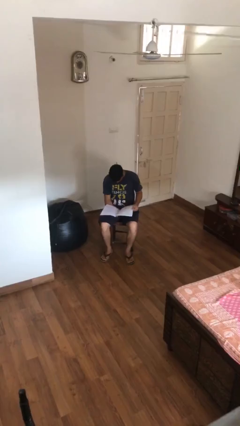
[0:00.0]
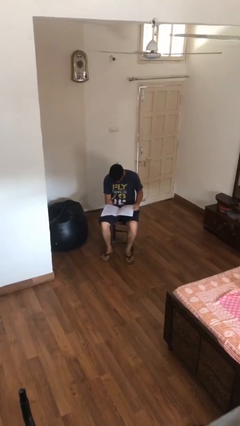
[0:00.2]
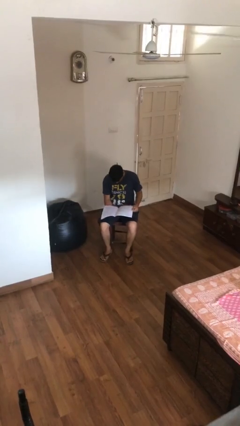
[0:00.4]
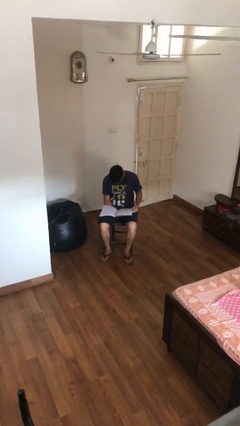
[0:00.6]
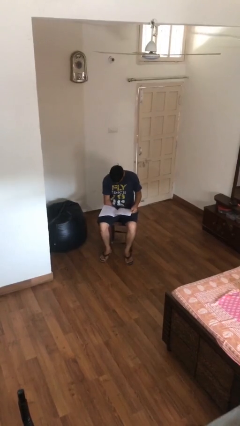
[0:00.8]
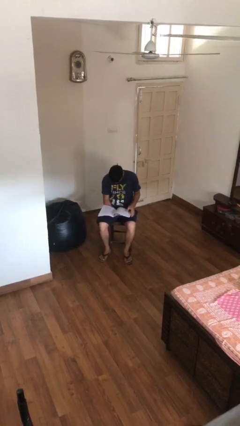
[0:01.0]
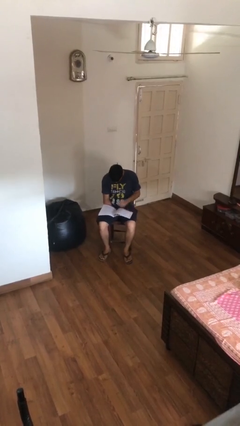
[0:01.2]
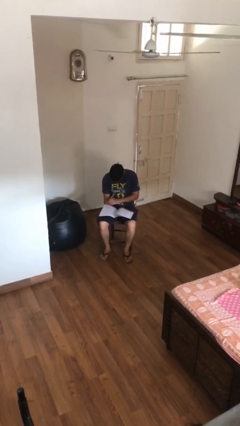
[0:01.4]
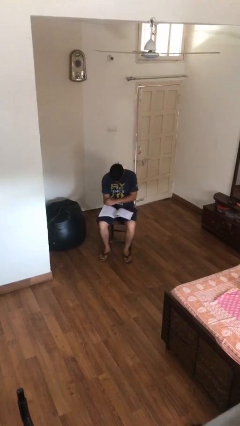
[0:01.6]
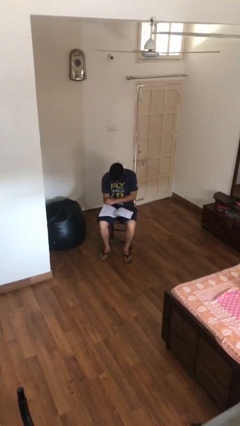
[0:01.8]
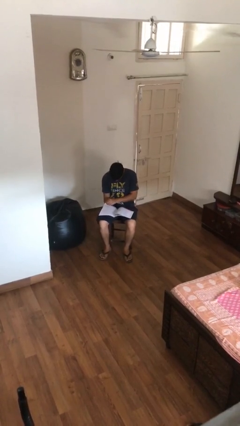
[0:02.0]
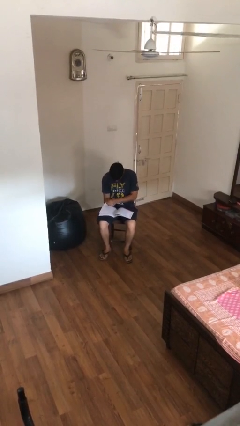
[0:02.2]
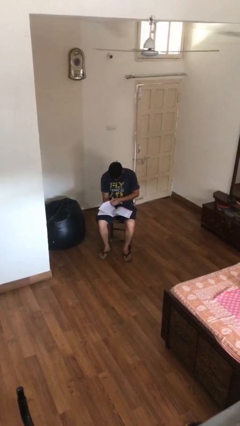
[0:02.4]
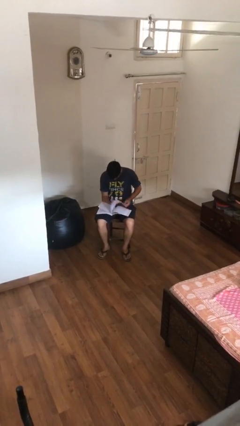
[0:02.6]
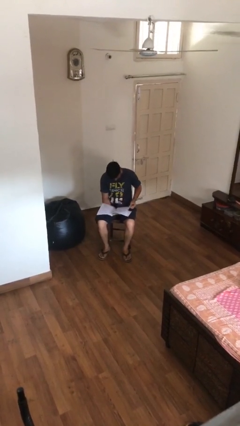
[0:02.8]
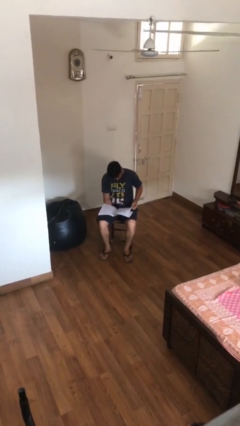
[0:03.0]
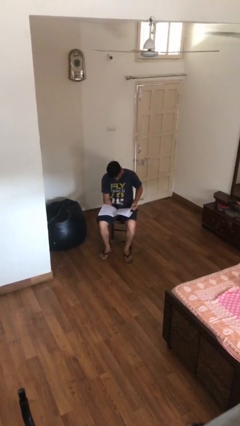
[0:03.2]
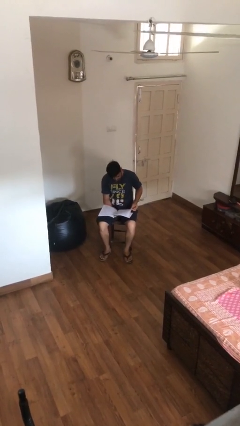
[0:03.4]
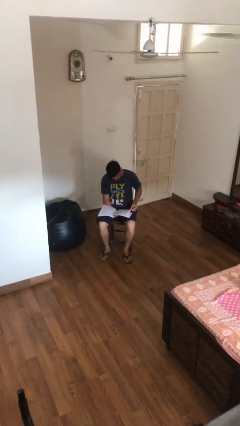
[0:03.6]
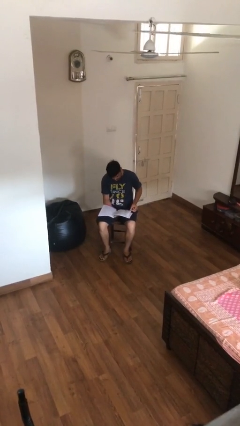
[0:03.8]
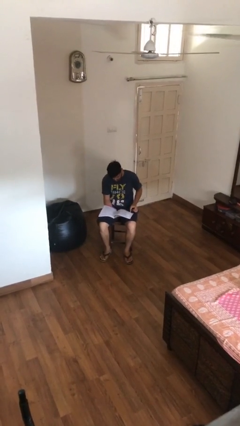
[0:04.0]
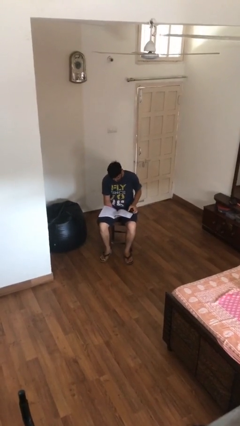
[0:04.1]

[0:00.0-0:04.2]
person reads document

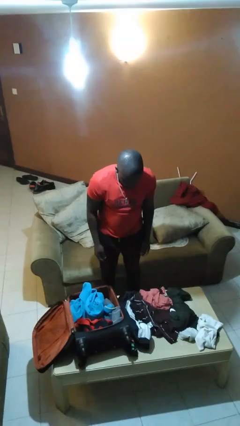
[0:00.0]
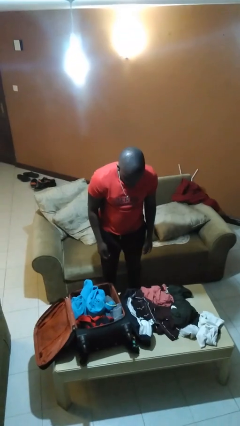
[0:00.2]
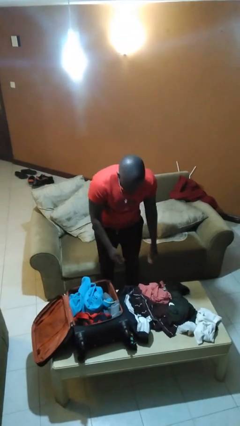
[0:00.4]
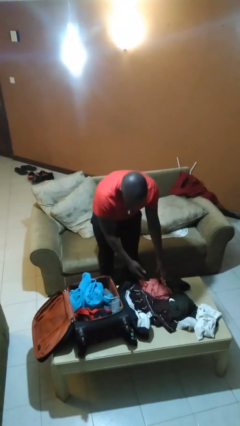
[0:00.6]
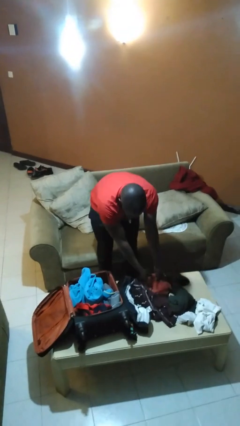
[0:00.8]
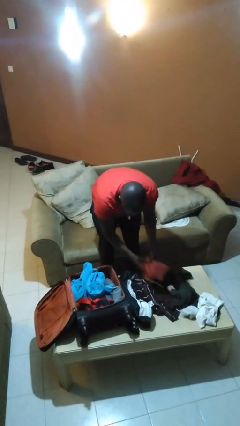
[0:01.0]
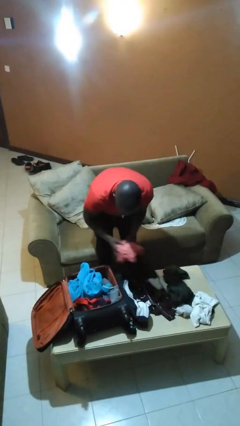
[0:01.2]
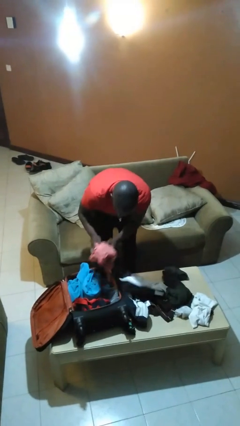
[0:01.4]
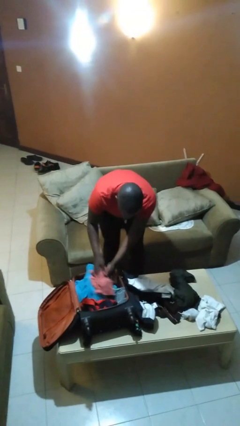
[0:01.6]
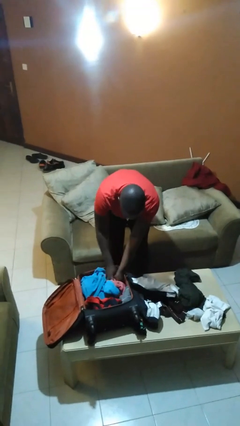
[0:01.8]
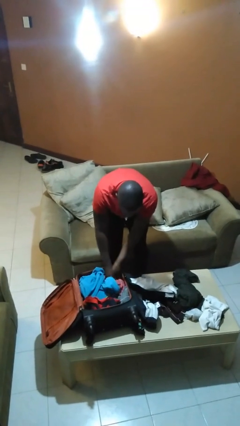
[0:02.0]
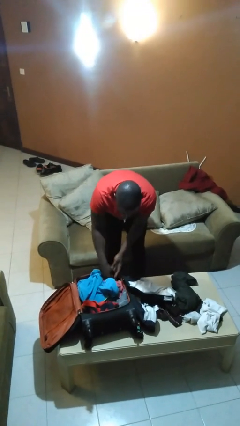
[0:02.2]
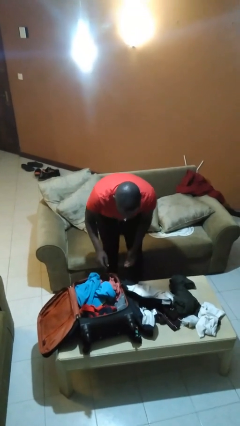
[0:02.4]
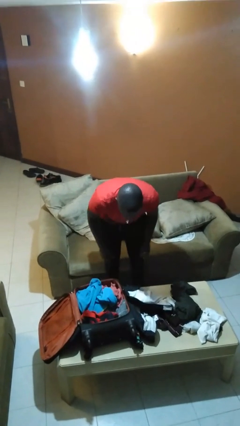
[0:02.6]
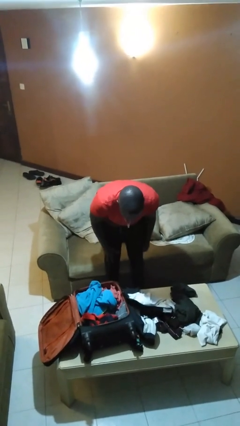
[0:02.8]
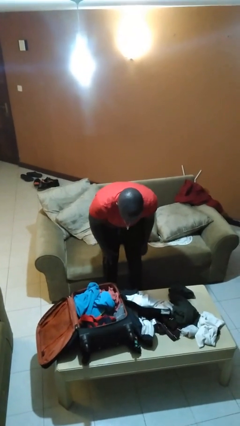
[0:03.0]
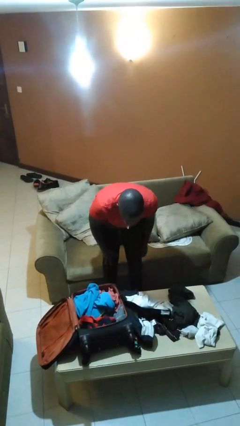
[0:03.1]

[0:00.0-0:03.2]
person loads clothes into suitcase

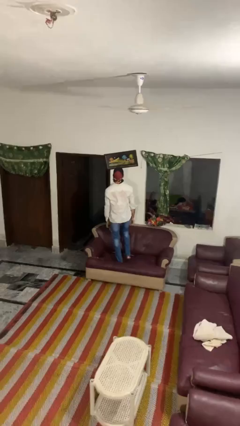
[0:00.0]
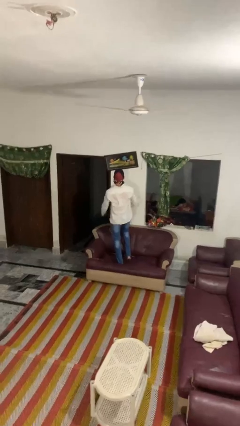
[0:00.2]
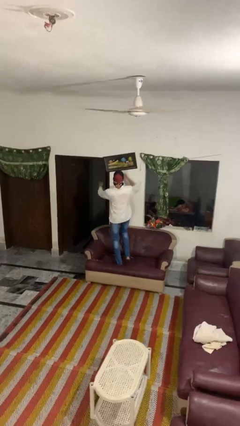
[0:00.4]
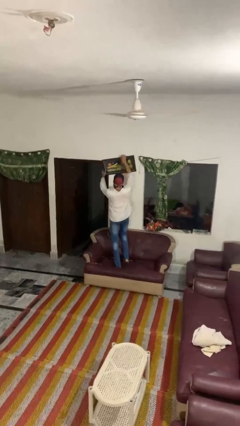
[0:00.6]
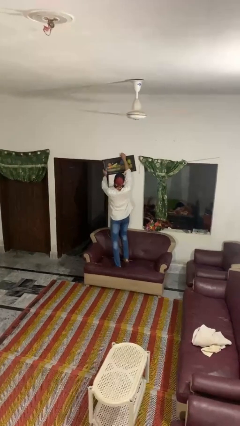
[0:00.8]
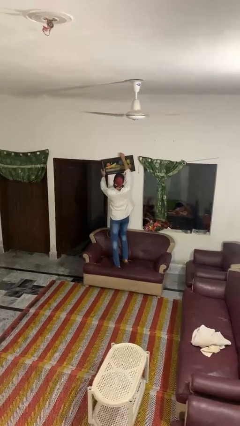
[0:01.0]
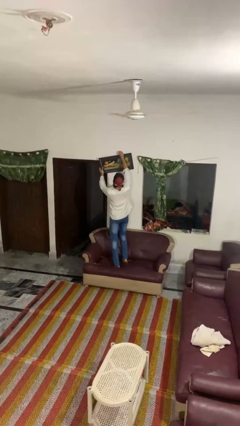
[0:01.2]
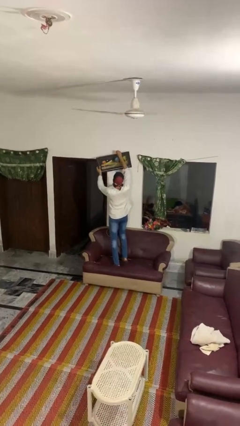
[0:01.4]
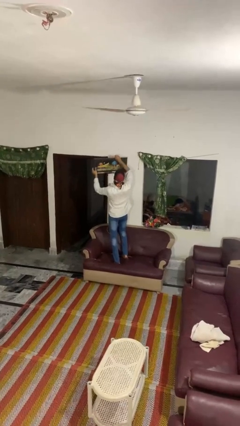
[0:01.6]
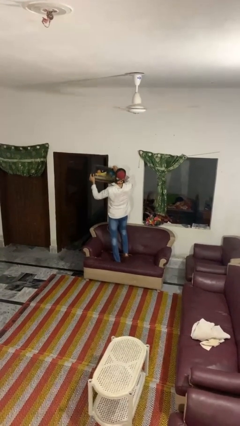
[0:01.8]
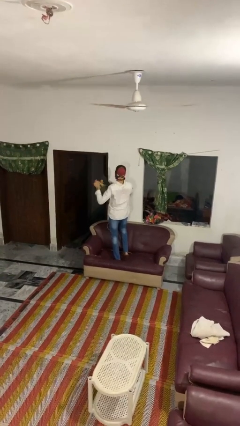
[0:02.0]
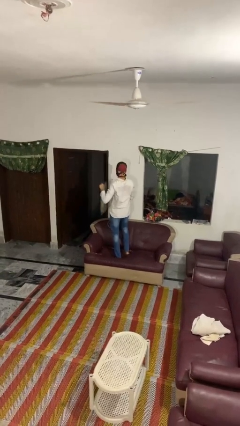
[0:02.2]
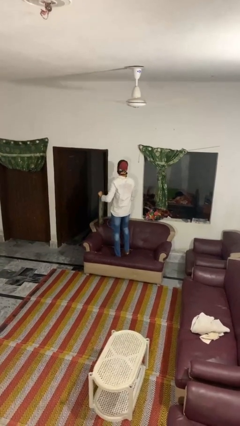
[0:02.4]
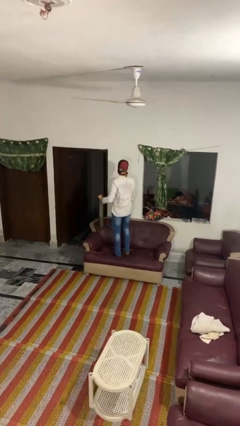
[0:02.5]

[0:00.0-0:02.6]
person takes down picture frame

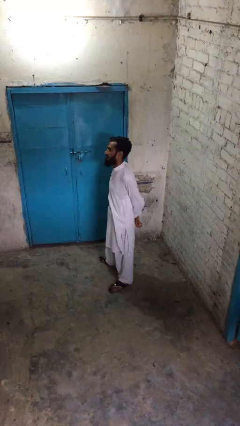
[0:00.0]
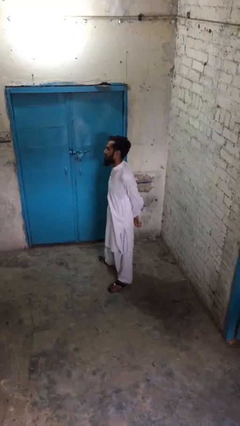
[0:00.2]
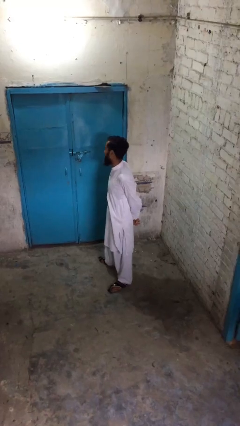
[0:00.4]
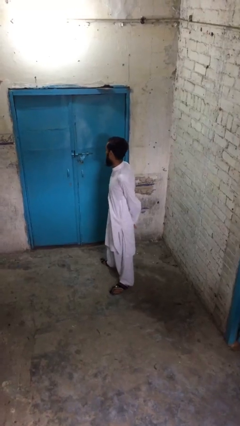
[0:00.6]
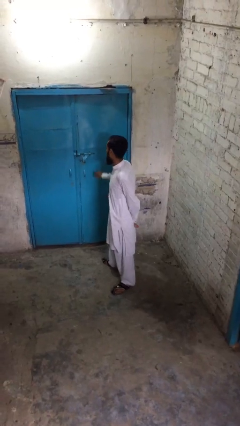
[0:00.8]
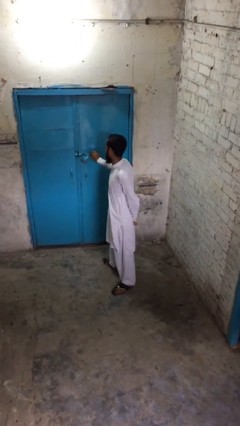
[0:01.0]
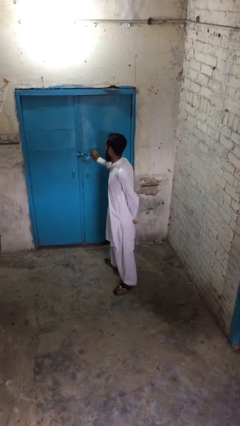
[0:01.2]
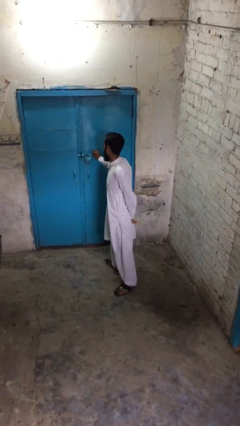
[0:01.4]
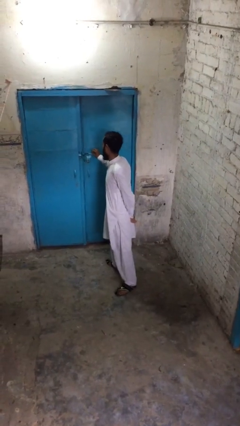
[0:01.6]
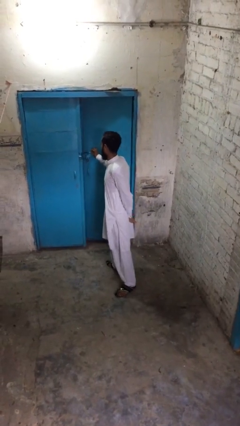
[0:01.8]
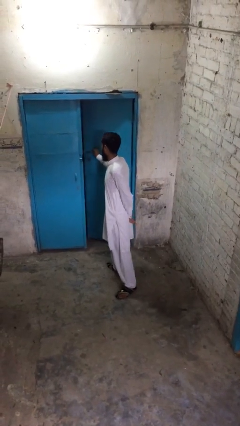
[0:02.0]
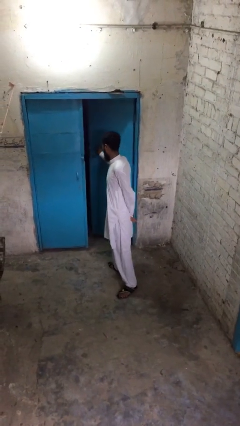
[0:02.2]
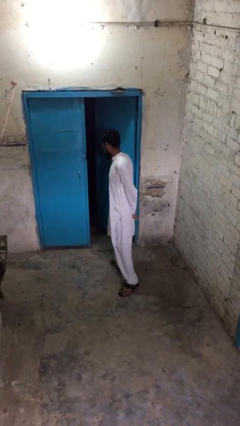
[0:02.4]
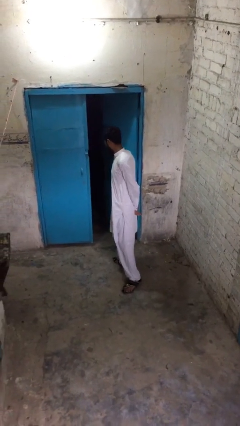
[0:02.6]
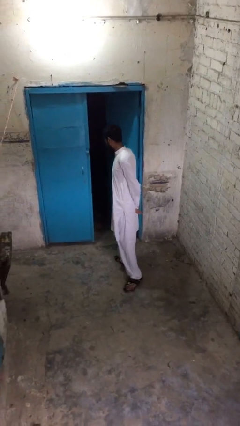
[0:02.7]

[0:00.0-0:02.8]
person opens facility door

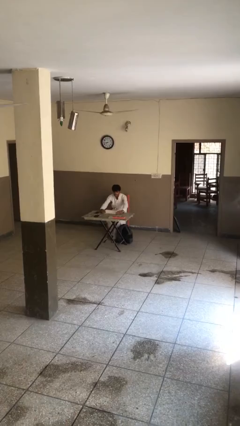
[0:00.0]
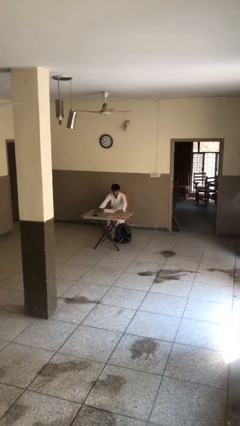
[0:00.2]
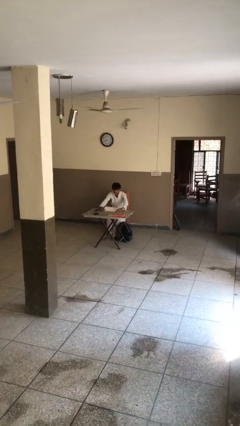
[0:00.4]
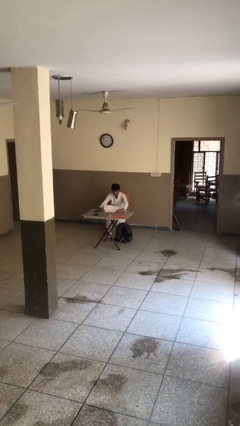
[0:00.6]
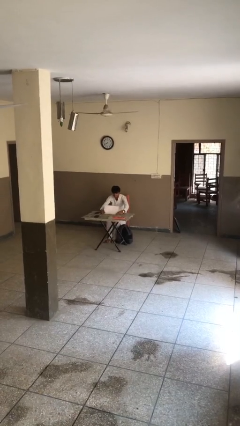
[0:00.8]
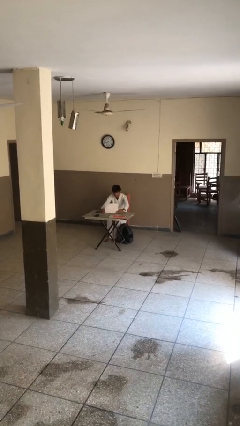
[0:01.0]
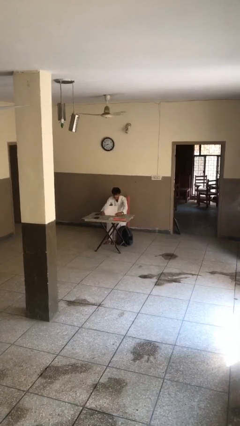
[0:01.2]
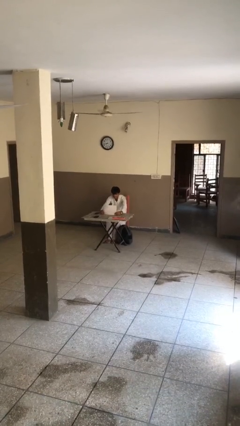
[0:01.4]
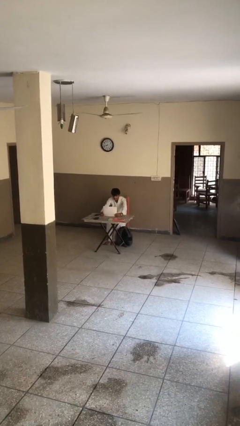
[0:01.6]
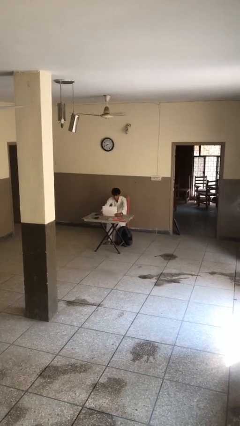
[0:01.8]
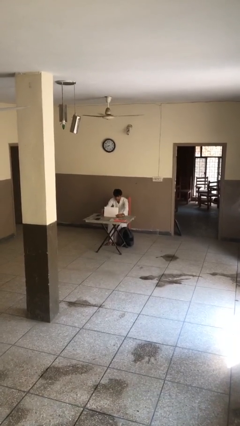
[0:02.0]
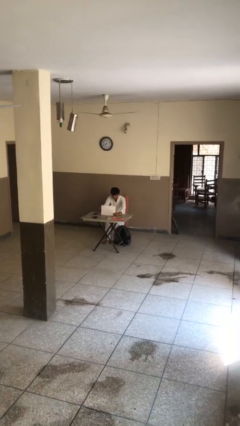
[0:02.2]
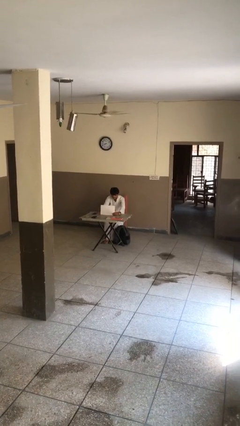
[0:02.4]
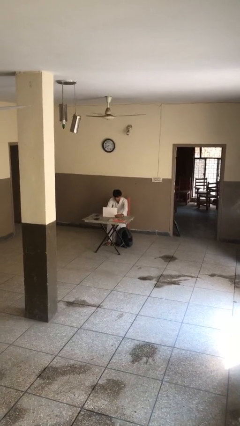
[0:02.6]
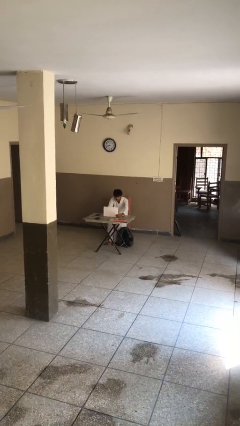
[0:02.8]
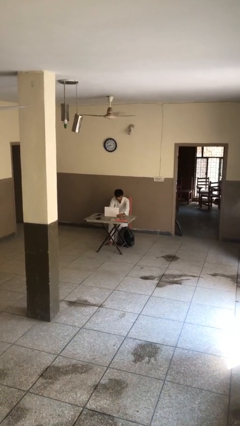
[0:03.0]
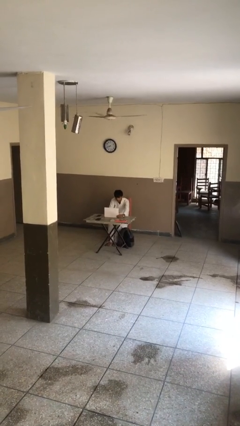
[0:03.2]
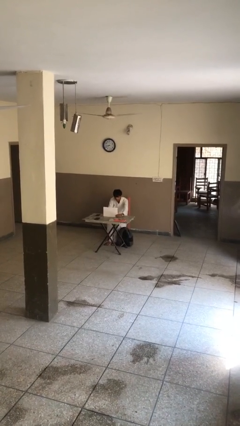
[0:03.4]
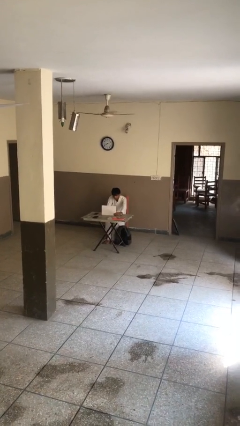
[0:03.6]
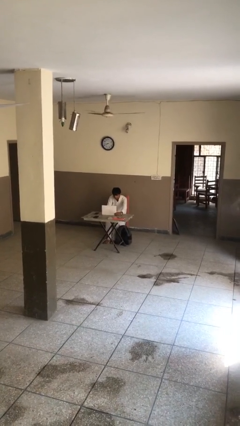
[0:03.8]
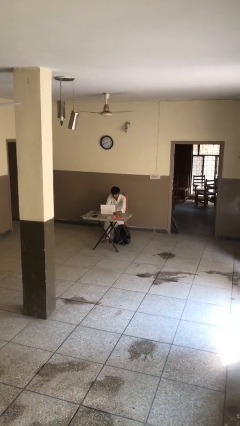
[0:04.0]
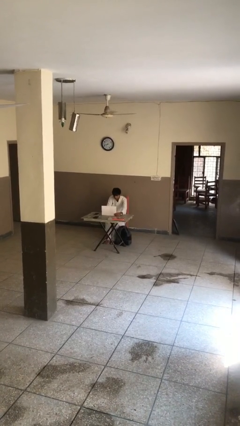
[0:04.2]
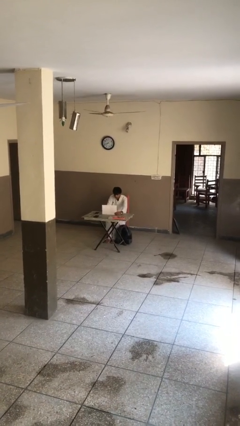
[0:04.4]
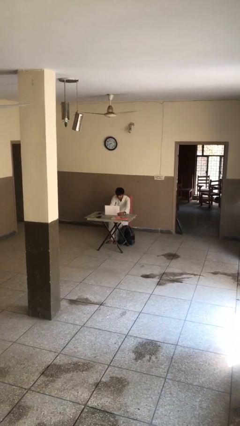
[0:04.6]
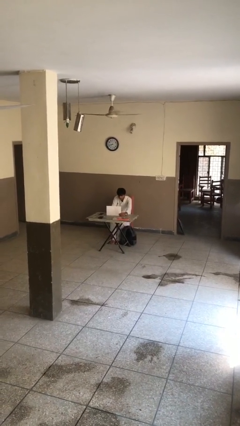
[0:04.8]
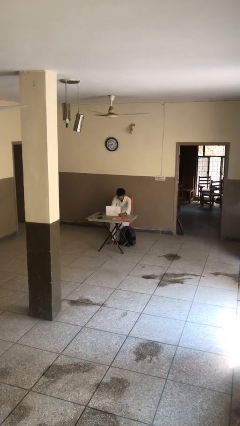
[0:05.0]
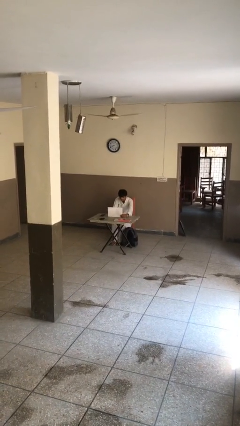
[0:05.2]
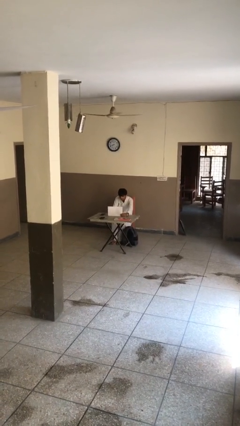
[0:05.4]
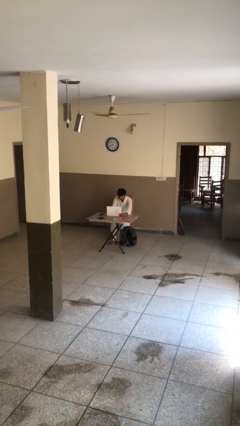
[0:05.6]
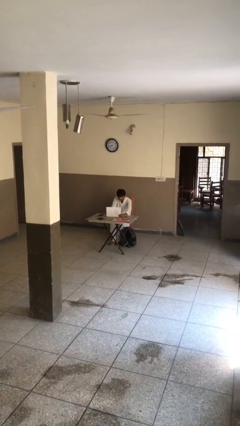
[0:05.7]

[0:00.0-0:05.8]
person interacts with laptop
